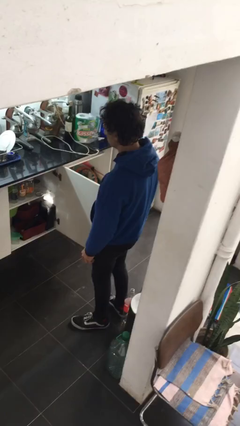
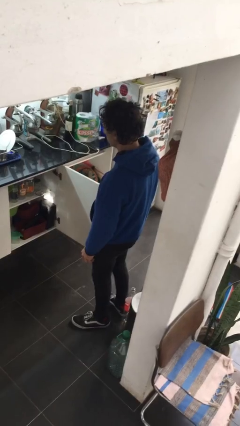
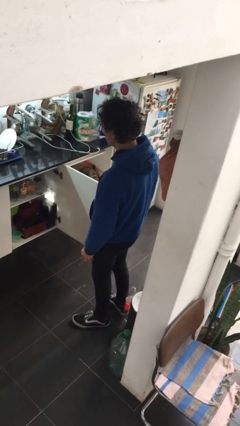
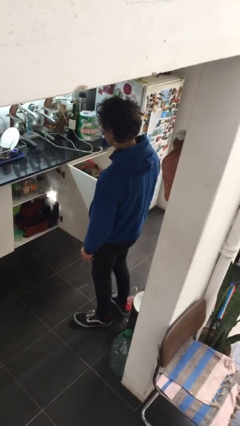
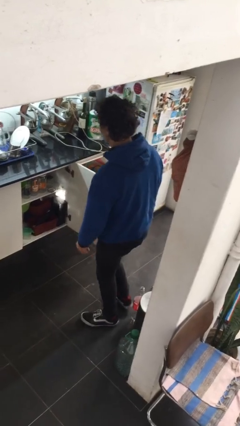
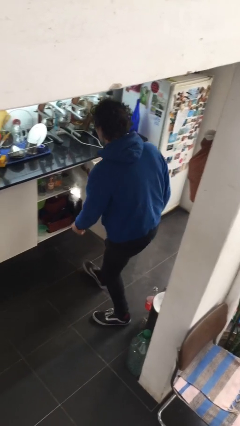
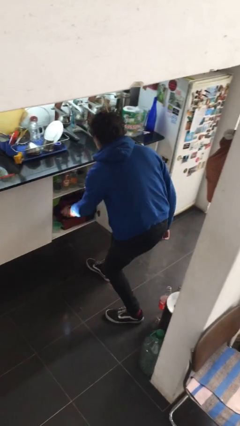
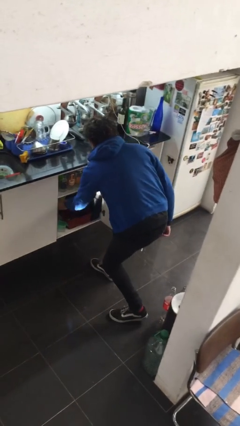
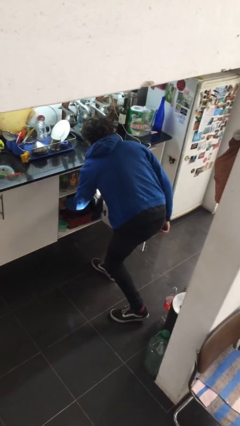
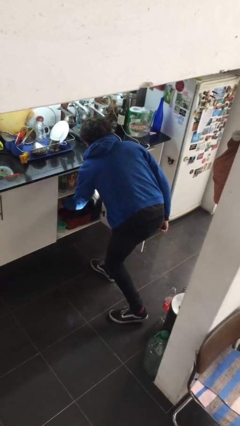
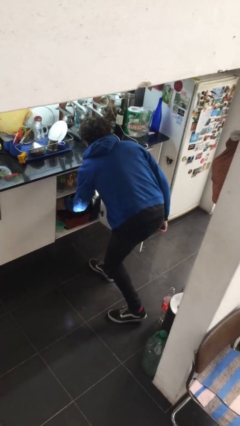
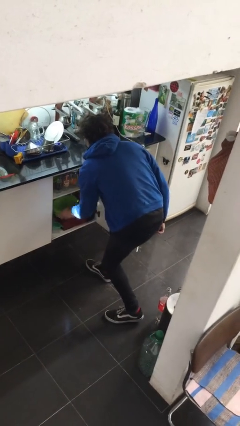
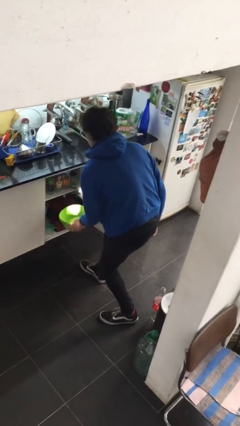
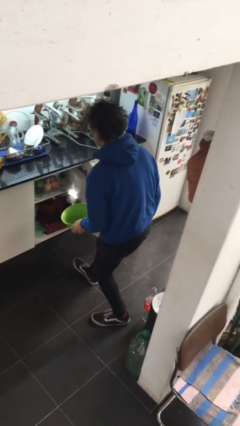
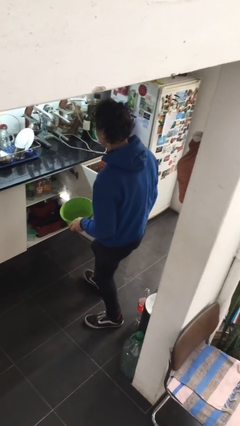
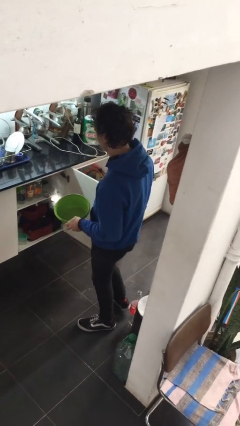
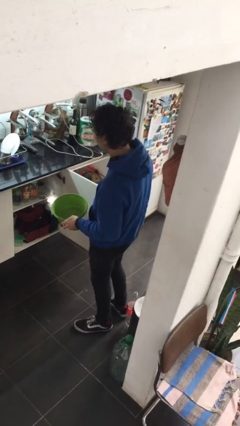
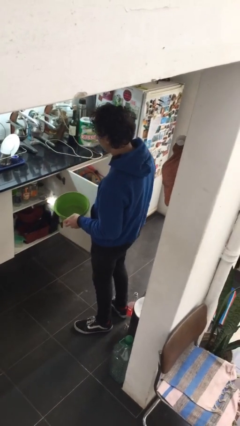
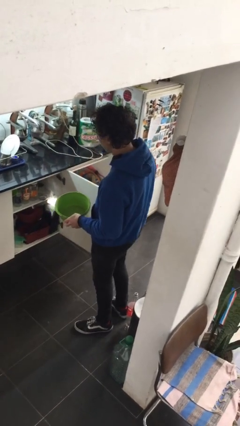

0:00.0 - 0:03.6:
person picks up object from cabinet

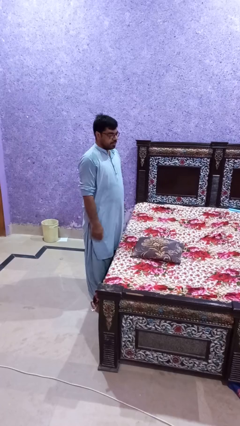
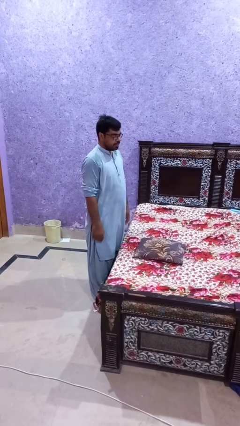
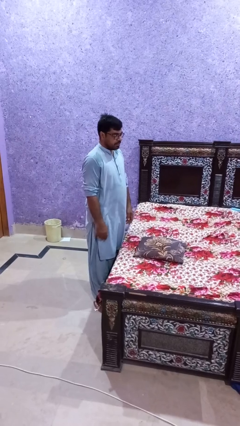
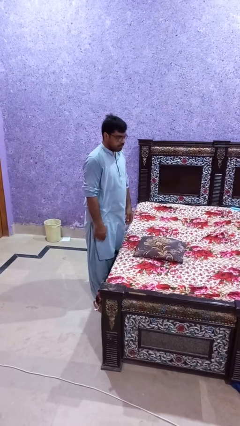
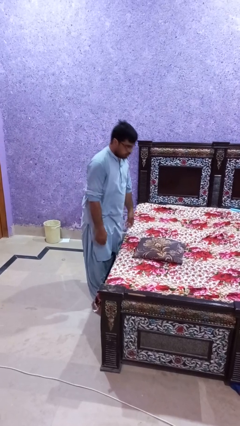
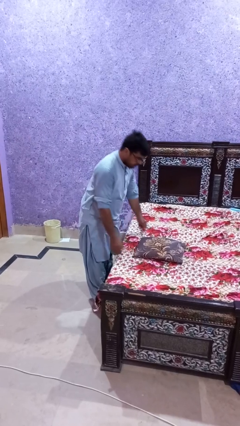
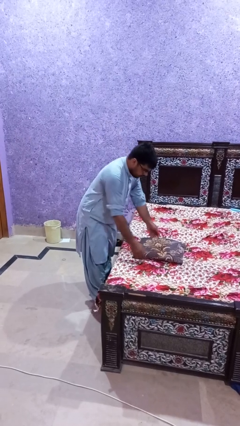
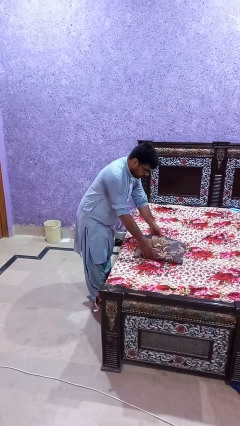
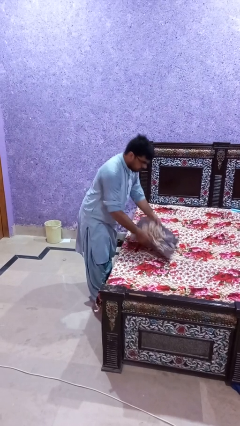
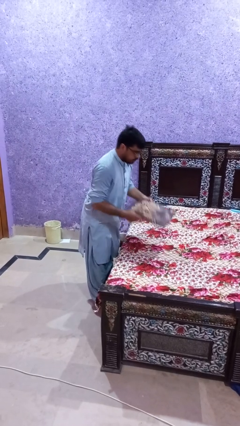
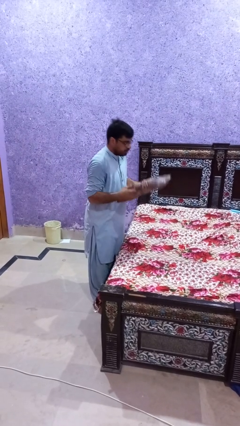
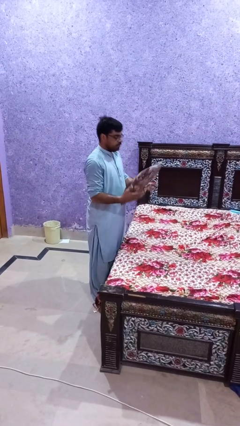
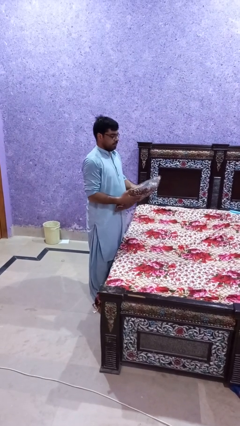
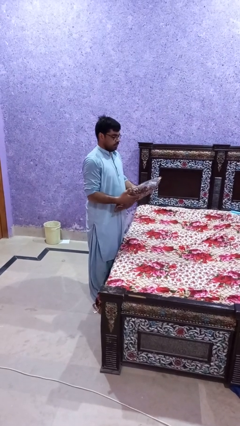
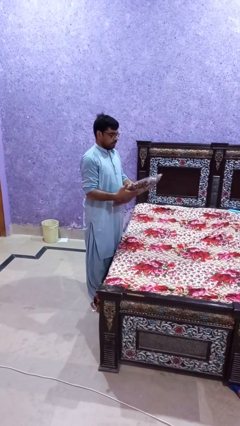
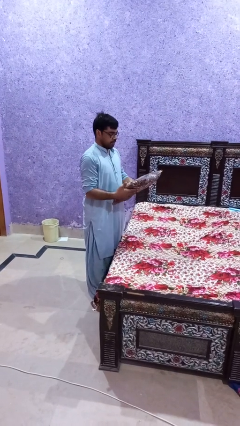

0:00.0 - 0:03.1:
person picks up object from bed

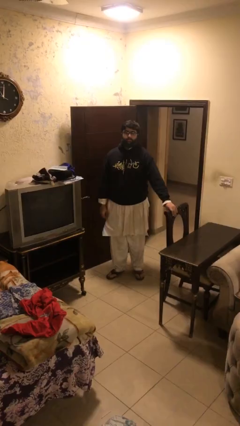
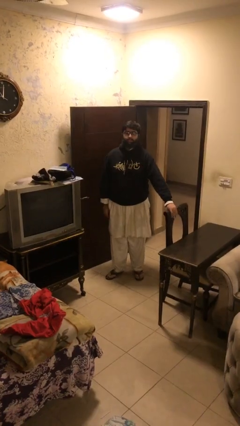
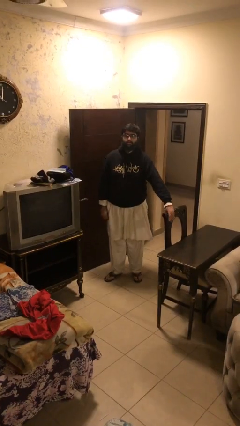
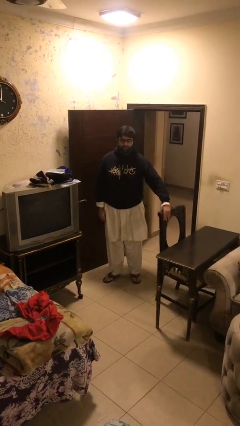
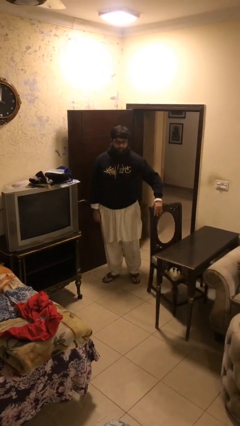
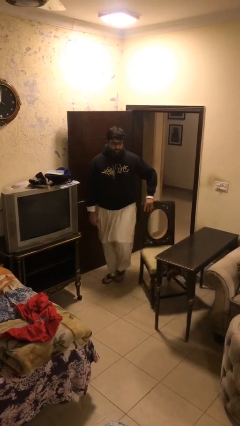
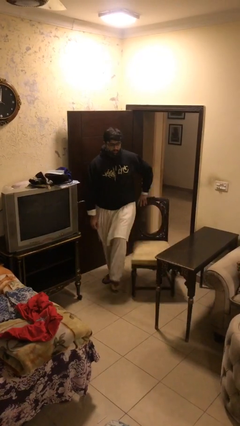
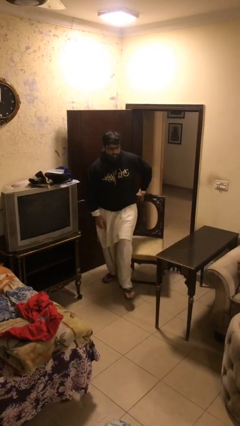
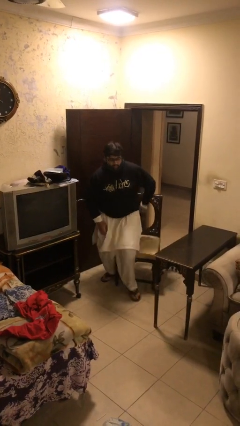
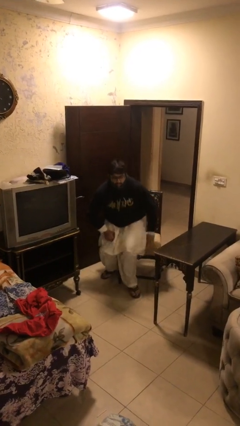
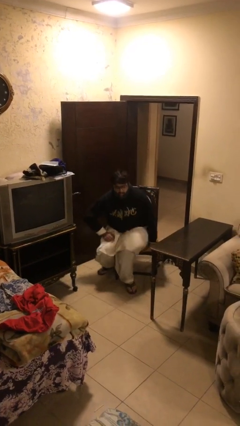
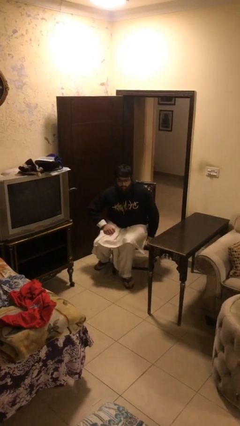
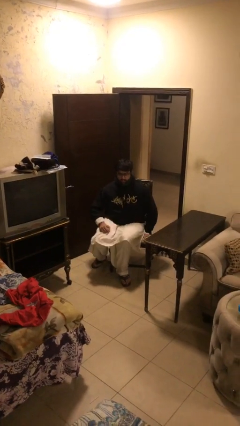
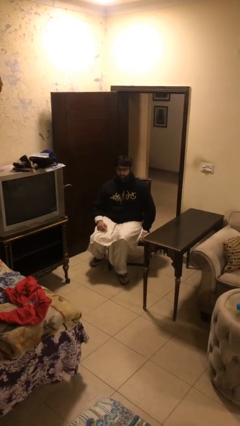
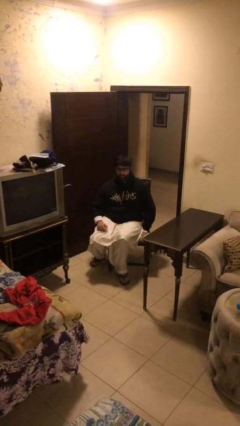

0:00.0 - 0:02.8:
person sits down

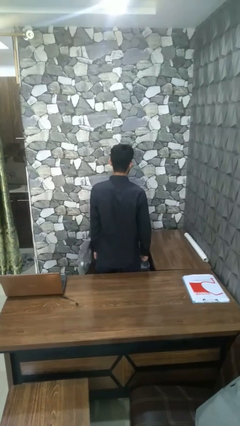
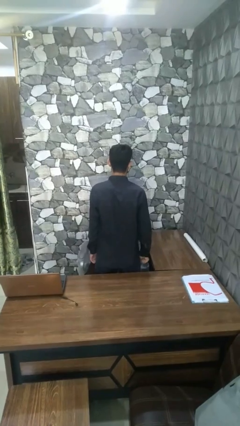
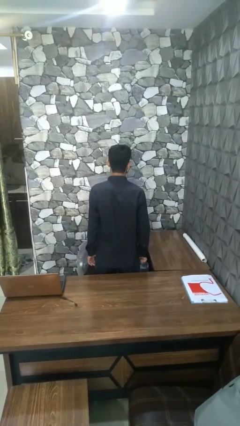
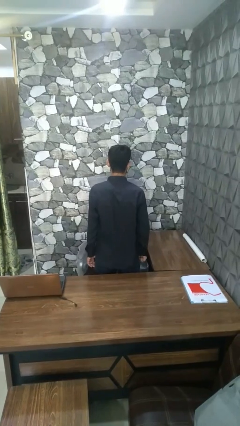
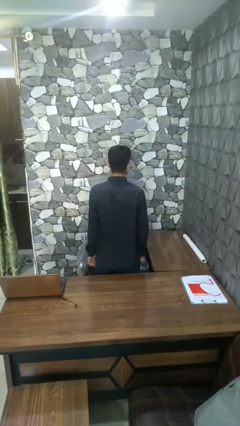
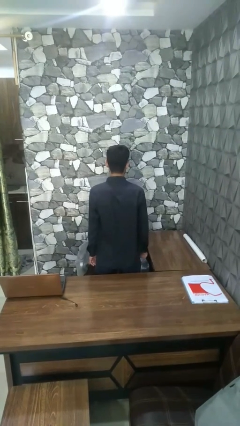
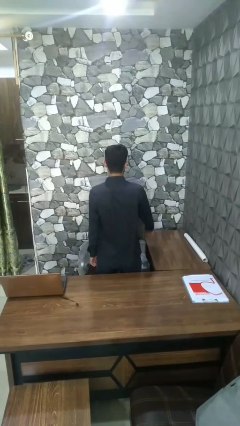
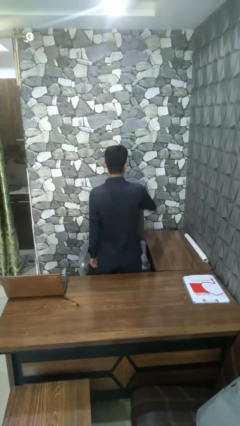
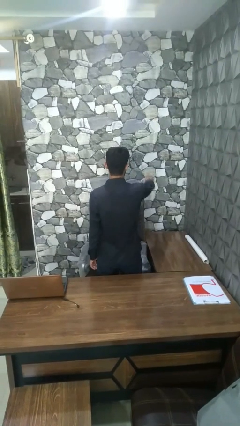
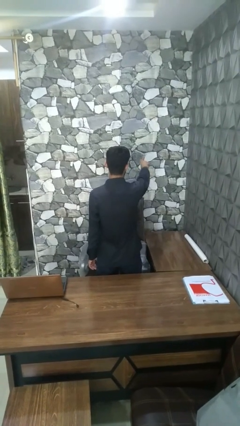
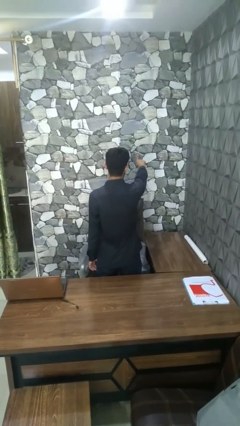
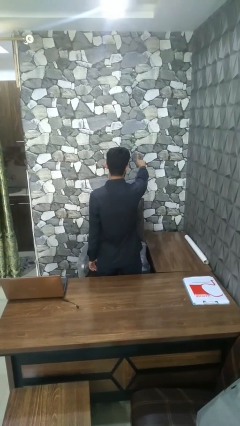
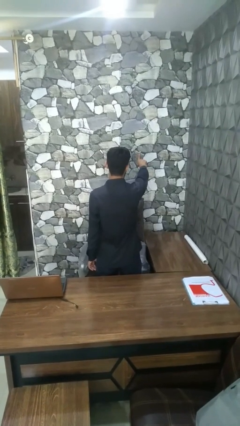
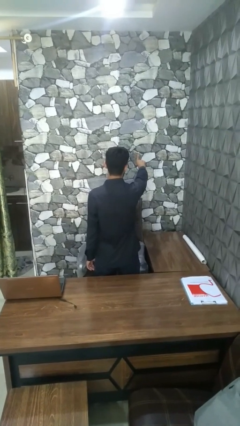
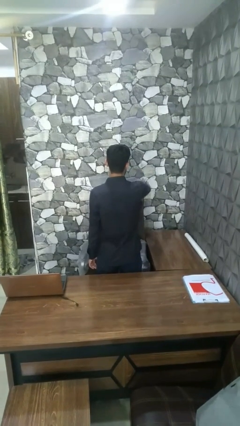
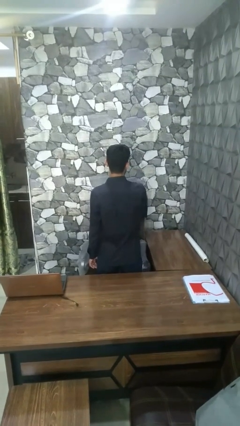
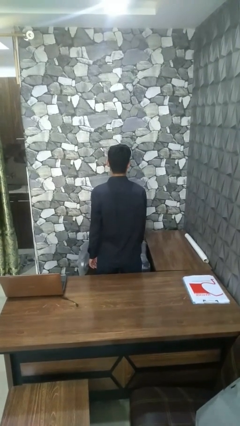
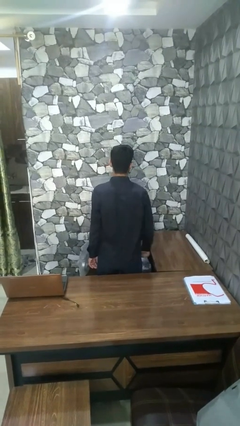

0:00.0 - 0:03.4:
person gestures number one

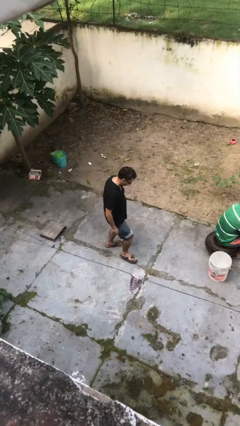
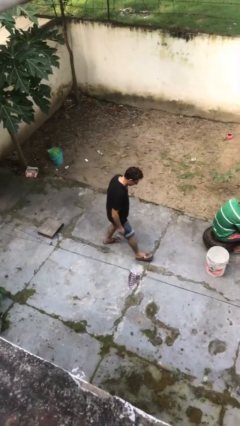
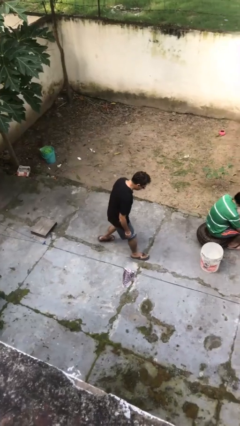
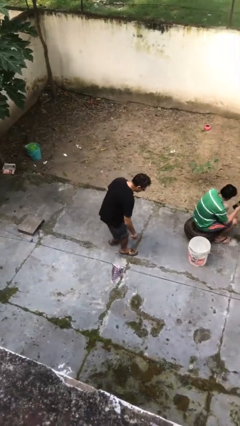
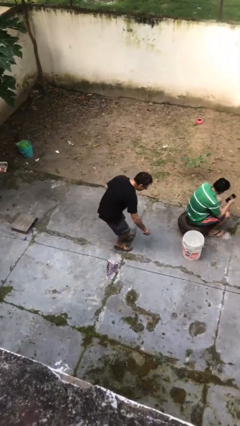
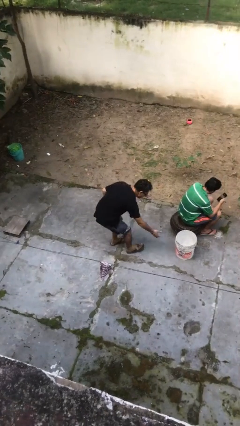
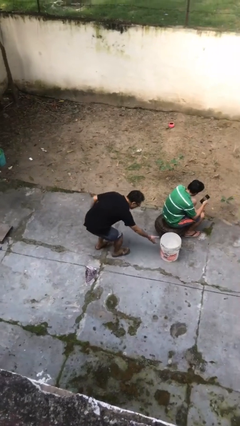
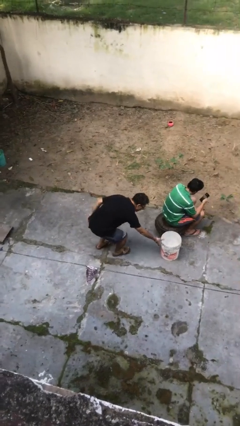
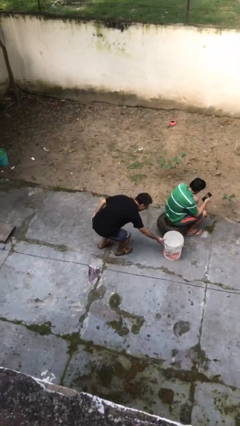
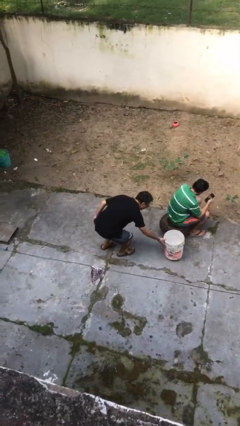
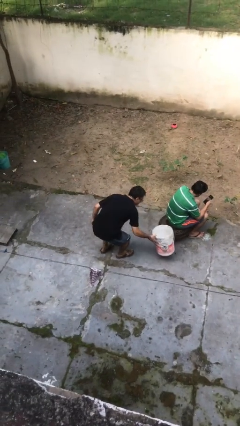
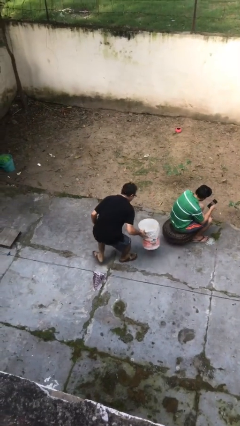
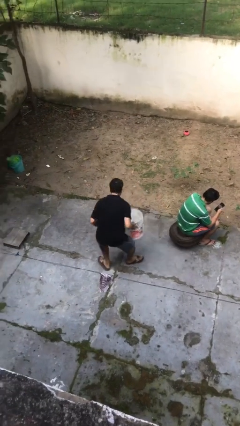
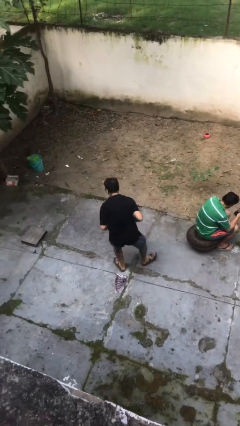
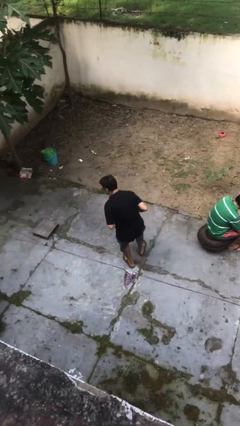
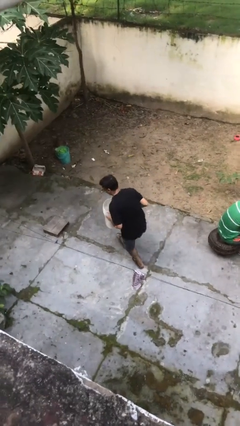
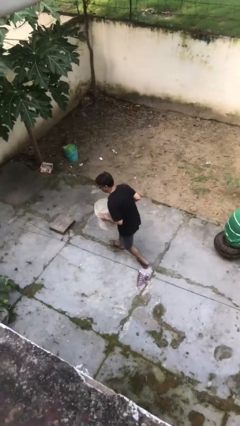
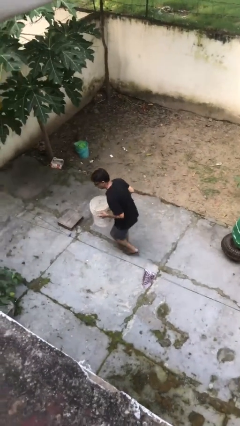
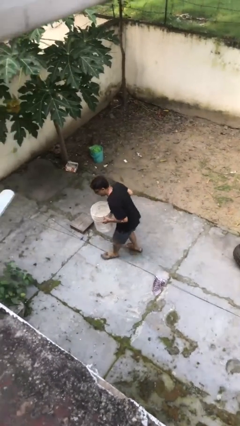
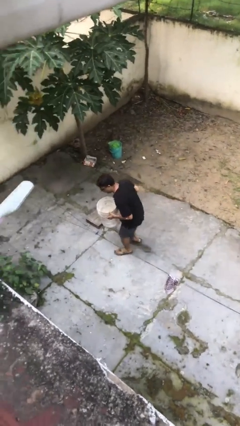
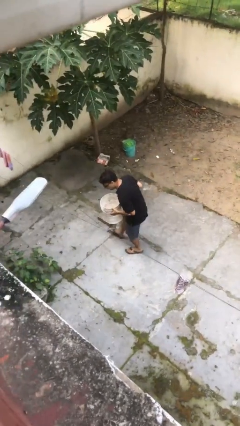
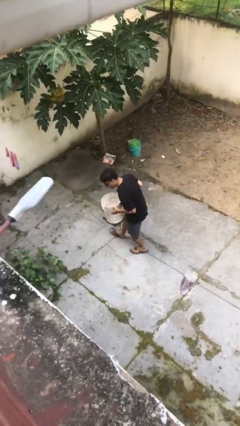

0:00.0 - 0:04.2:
person steals object from person

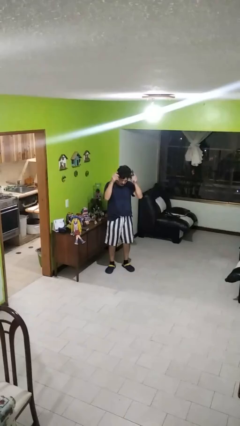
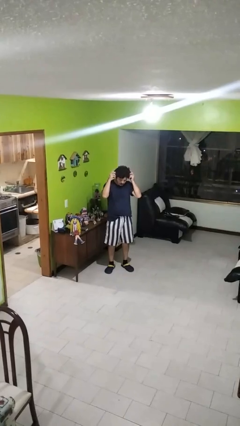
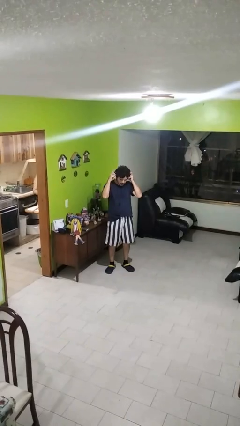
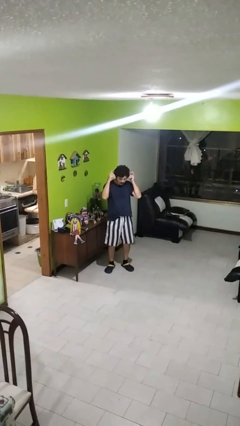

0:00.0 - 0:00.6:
person puts on headphones
